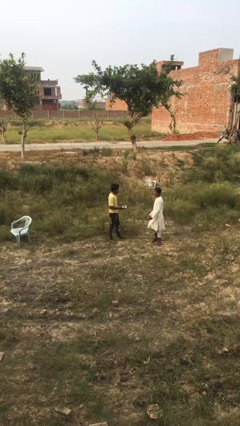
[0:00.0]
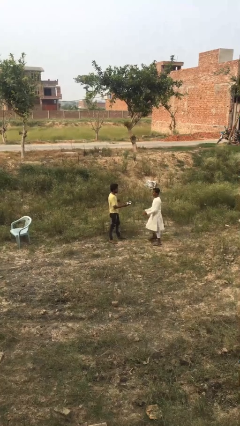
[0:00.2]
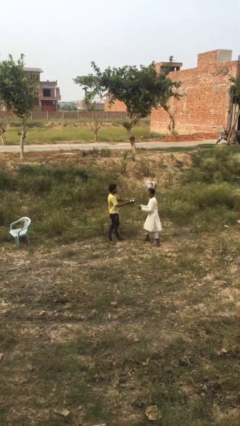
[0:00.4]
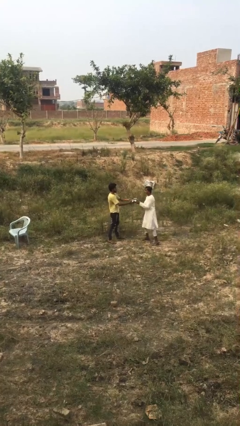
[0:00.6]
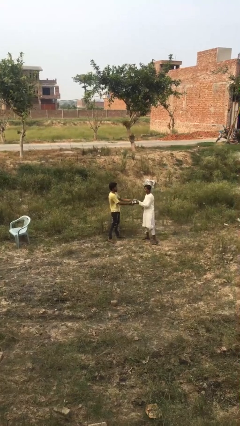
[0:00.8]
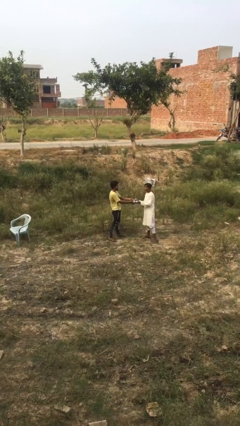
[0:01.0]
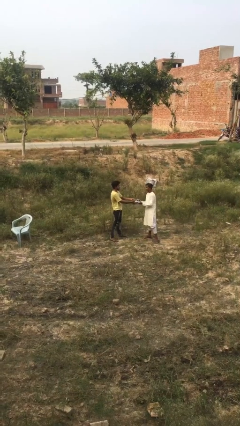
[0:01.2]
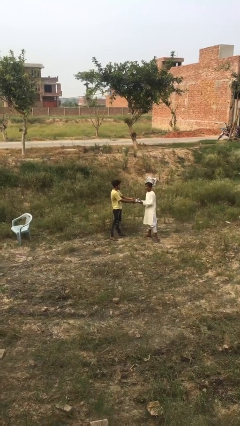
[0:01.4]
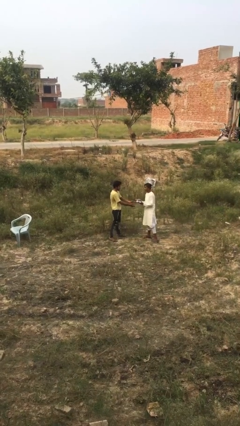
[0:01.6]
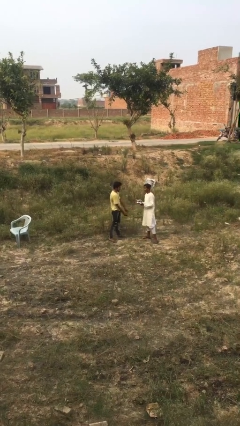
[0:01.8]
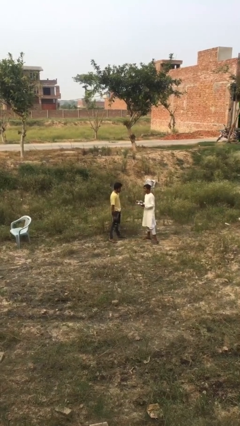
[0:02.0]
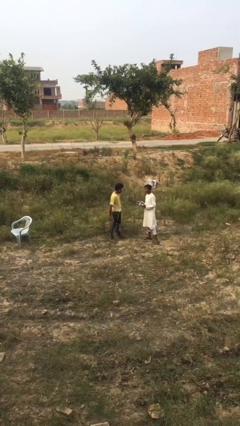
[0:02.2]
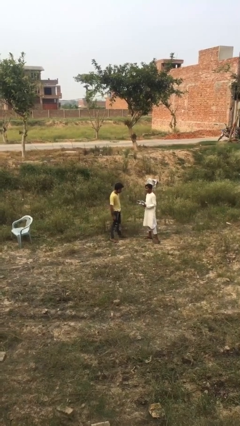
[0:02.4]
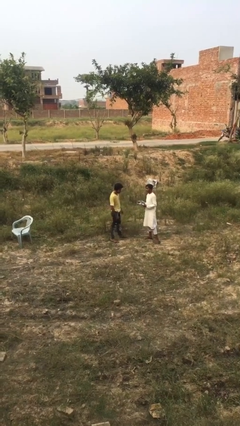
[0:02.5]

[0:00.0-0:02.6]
person transfers object to person

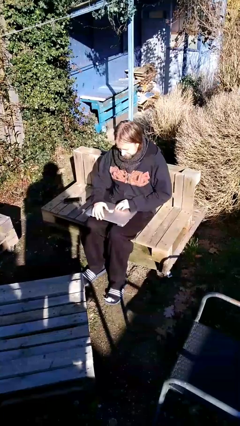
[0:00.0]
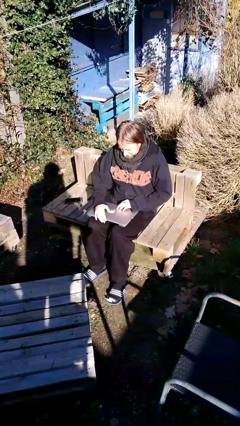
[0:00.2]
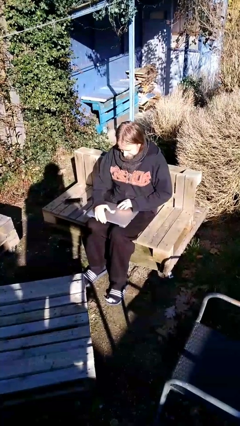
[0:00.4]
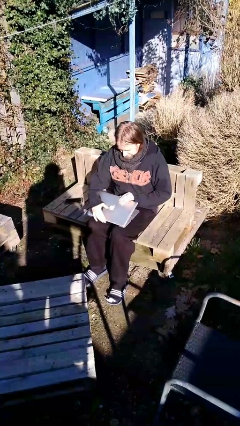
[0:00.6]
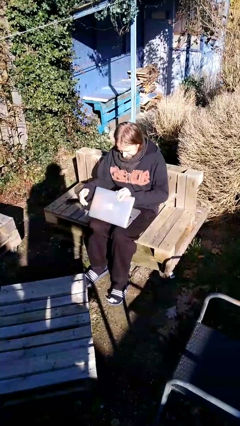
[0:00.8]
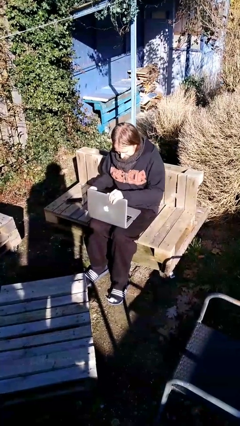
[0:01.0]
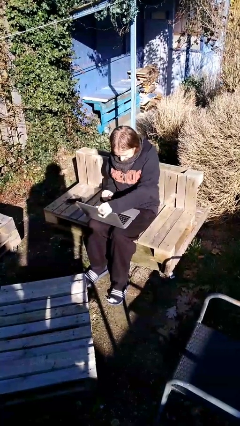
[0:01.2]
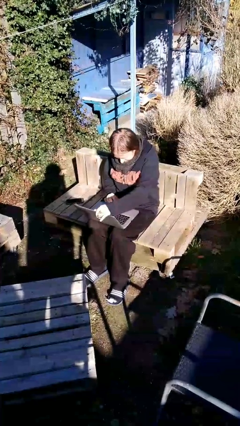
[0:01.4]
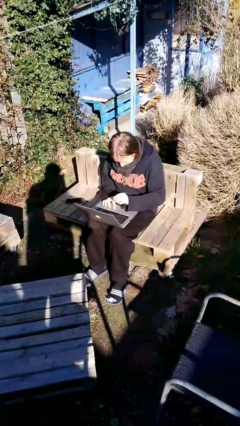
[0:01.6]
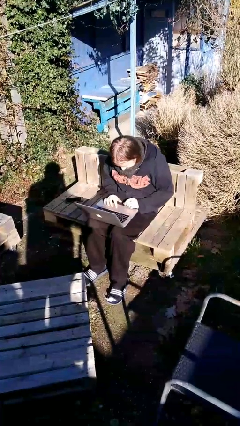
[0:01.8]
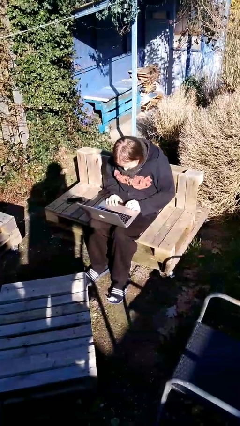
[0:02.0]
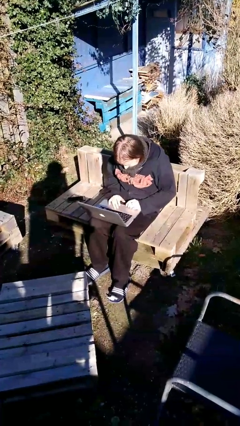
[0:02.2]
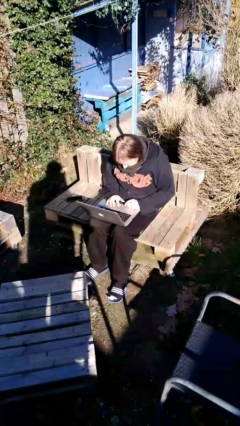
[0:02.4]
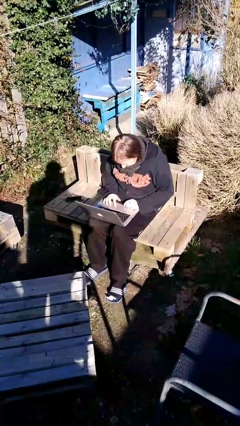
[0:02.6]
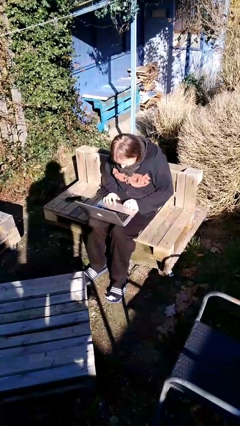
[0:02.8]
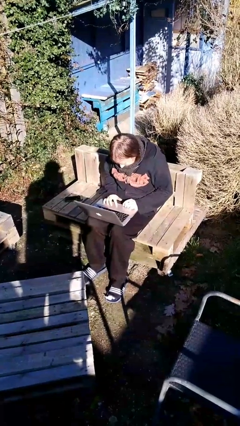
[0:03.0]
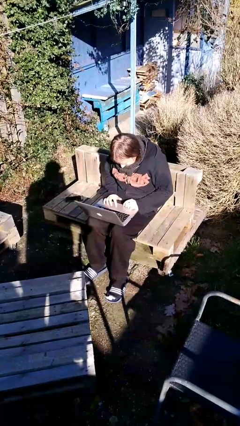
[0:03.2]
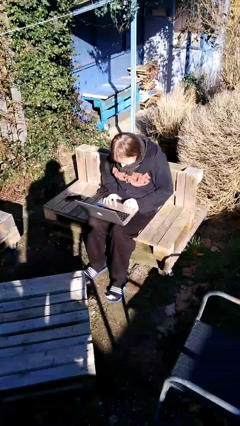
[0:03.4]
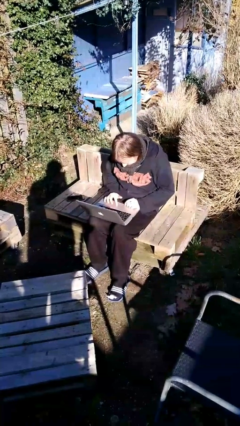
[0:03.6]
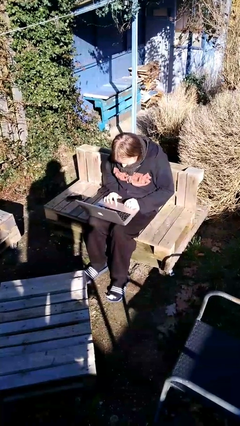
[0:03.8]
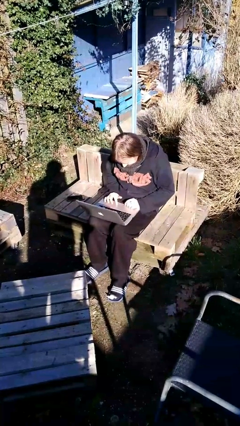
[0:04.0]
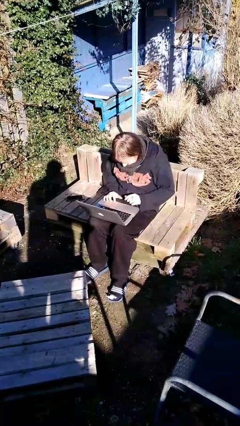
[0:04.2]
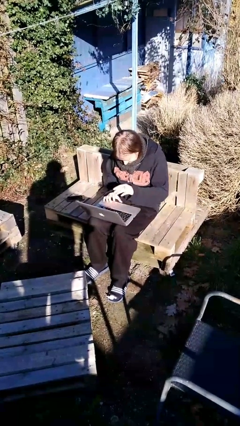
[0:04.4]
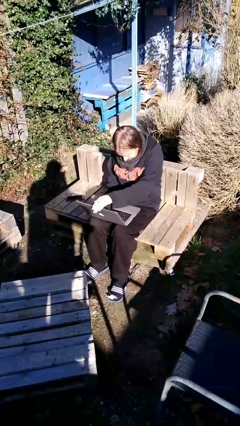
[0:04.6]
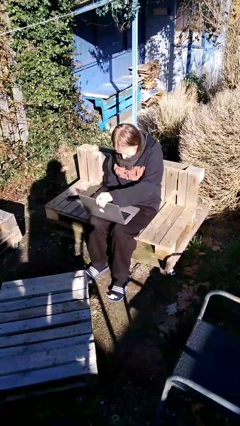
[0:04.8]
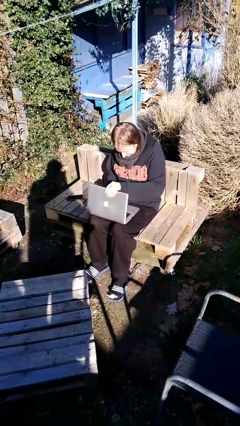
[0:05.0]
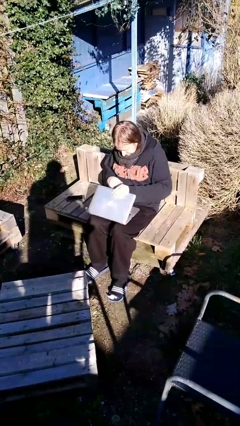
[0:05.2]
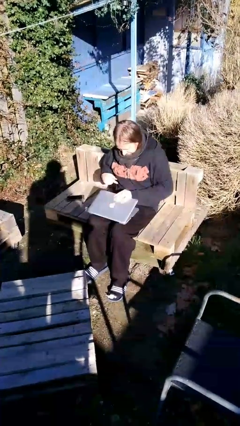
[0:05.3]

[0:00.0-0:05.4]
person interacts with laptop

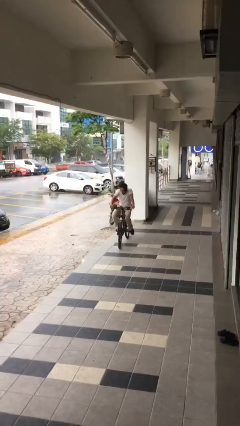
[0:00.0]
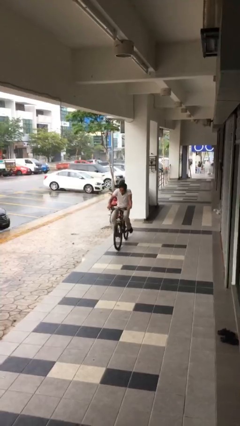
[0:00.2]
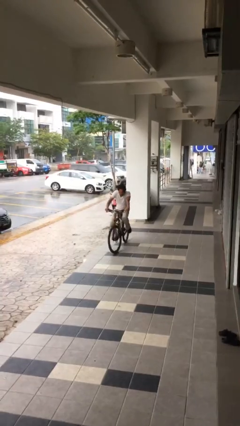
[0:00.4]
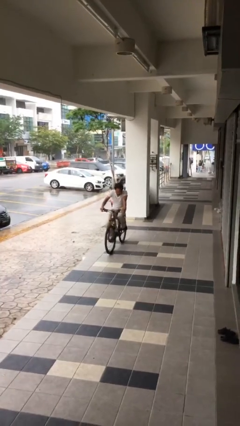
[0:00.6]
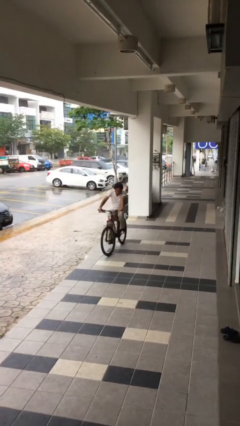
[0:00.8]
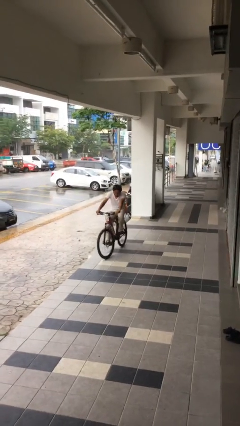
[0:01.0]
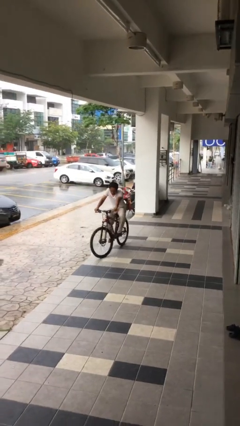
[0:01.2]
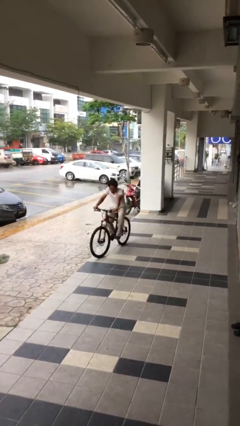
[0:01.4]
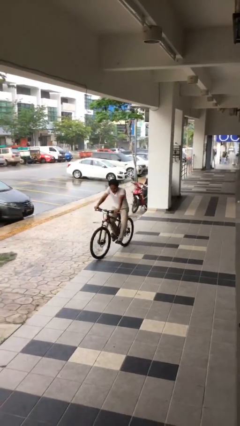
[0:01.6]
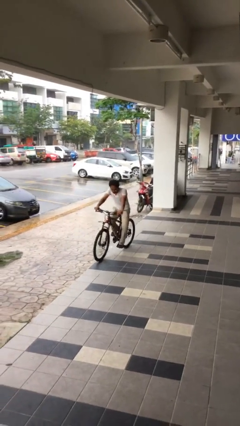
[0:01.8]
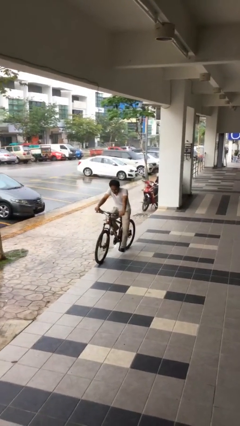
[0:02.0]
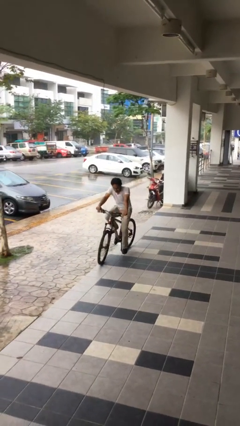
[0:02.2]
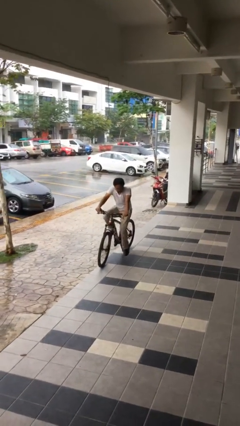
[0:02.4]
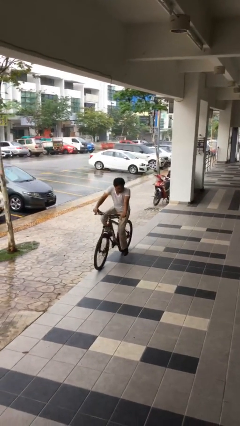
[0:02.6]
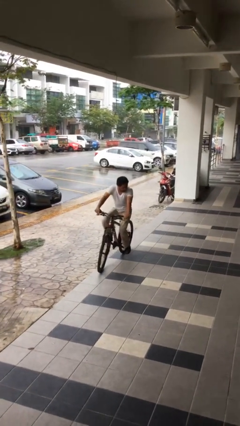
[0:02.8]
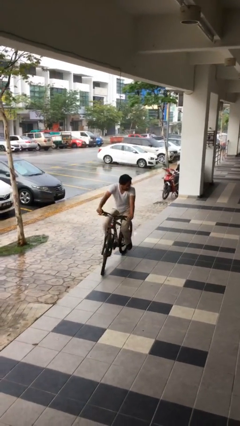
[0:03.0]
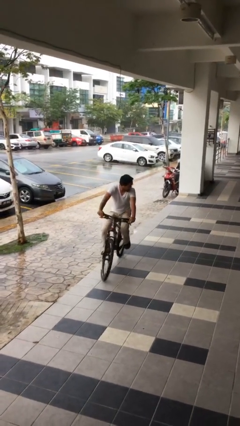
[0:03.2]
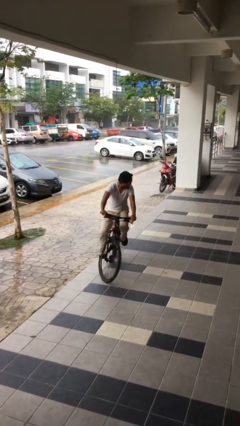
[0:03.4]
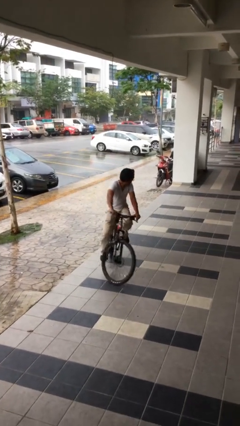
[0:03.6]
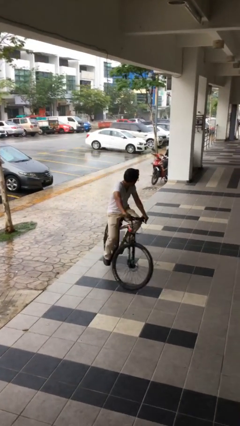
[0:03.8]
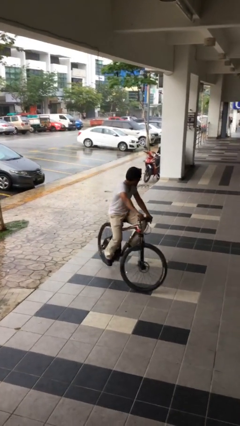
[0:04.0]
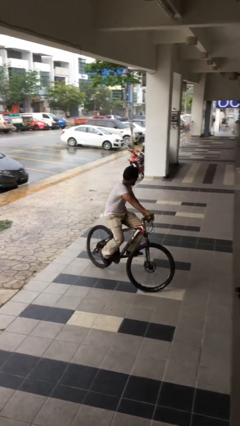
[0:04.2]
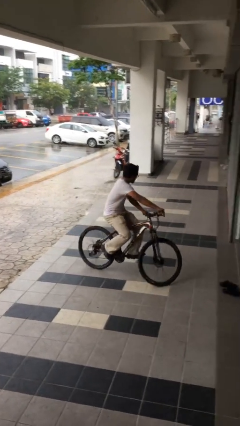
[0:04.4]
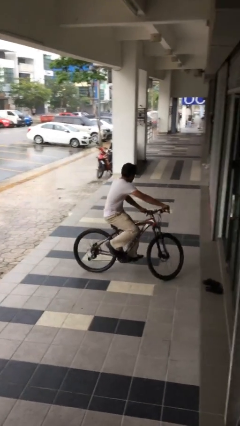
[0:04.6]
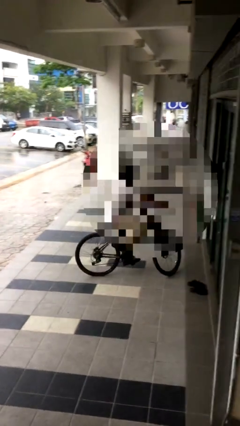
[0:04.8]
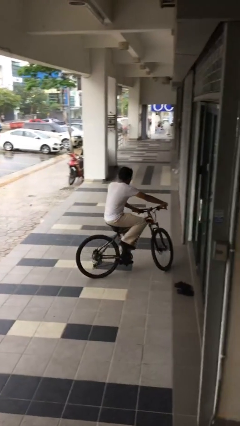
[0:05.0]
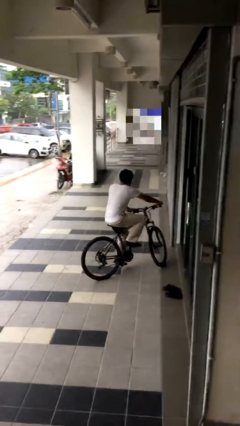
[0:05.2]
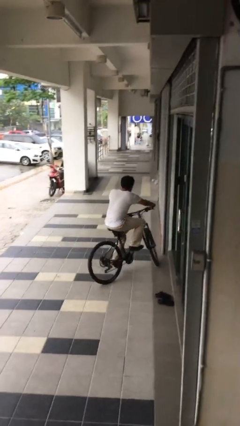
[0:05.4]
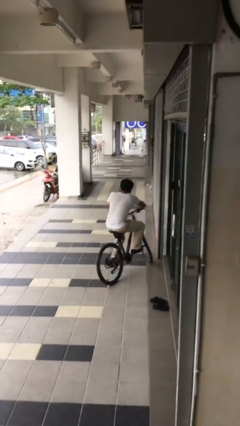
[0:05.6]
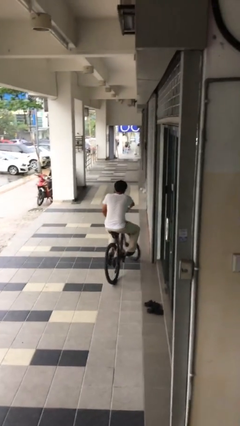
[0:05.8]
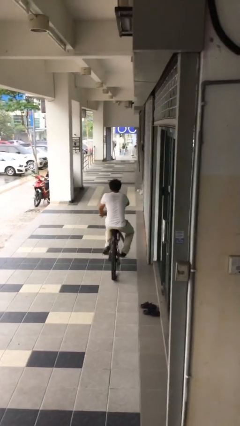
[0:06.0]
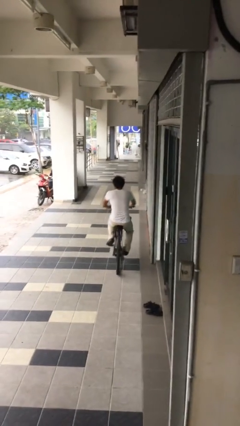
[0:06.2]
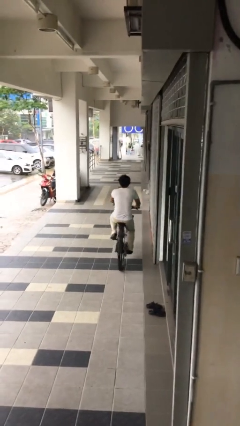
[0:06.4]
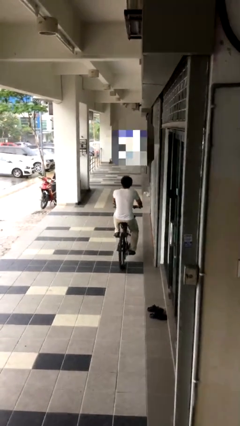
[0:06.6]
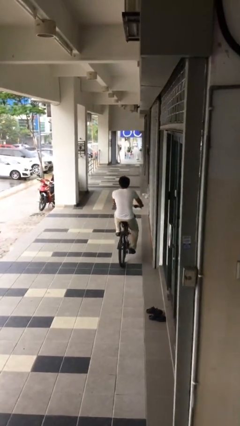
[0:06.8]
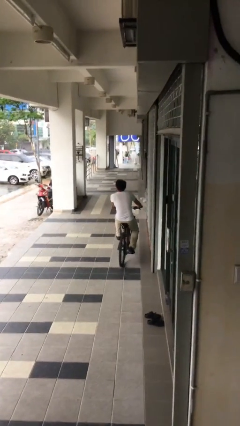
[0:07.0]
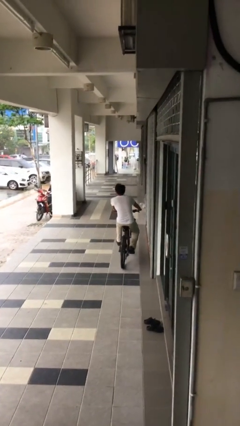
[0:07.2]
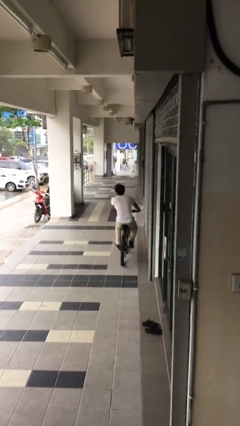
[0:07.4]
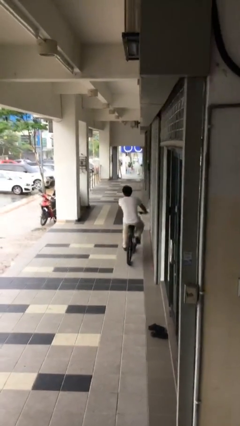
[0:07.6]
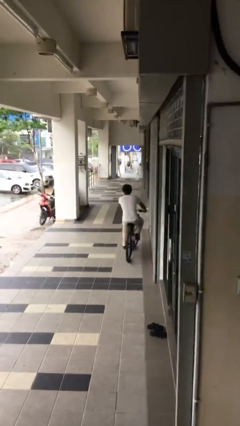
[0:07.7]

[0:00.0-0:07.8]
person rides bicycle

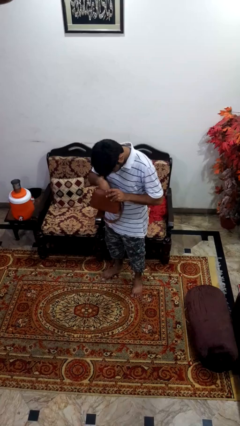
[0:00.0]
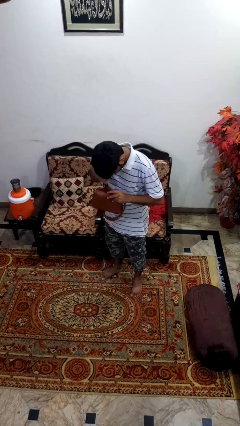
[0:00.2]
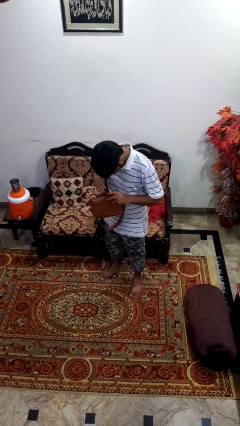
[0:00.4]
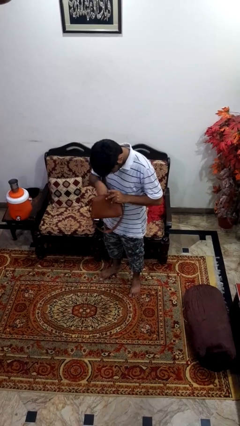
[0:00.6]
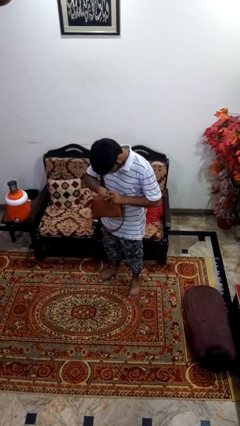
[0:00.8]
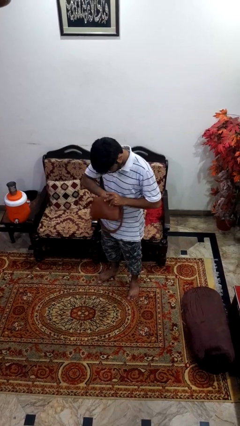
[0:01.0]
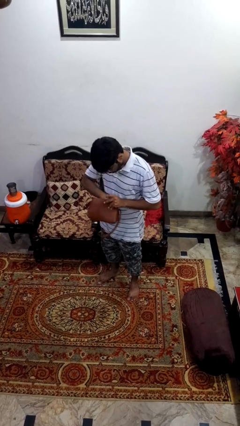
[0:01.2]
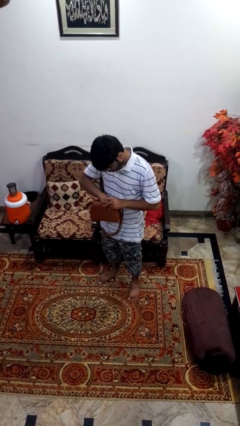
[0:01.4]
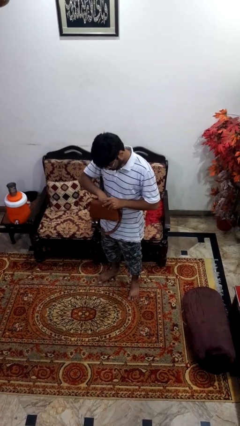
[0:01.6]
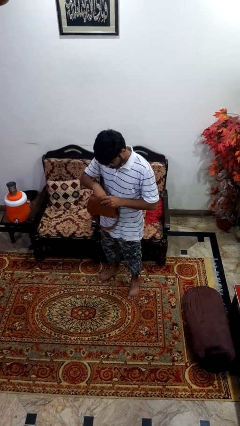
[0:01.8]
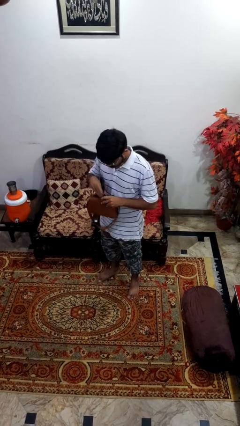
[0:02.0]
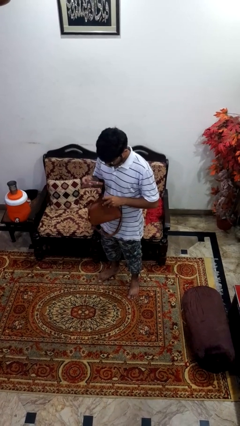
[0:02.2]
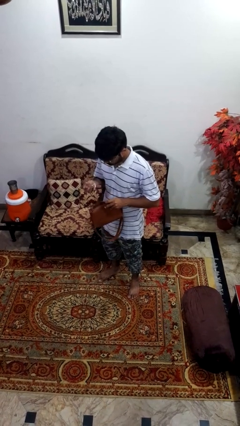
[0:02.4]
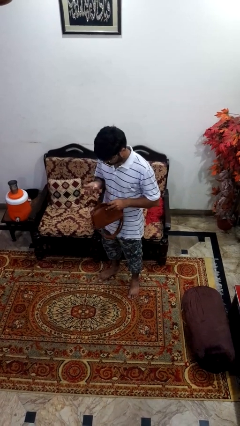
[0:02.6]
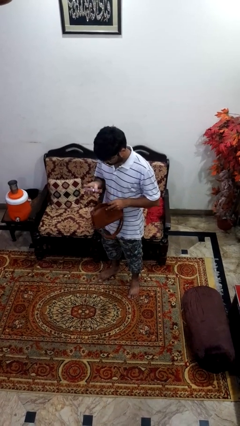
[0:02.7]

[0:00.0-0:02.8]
person takes object from purse
